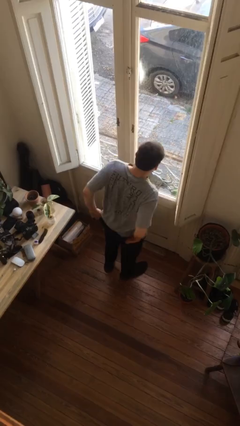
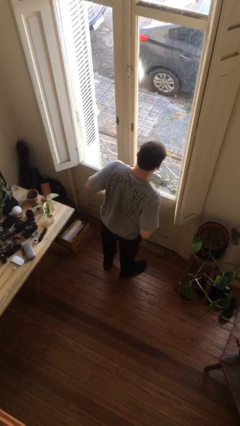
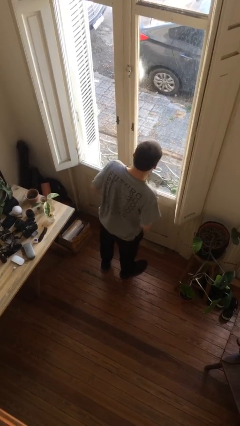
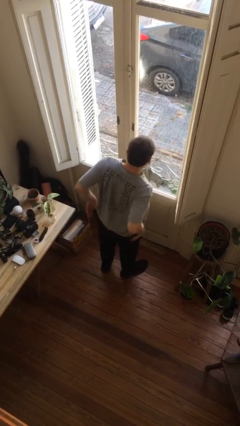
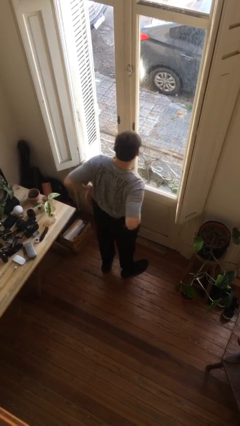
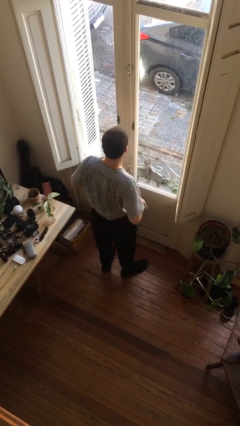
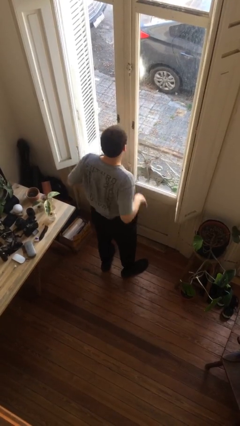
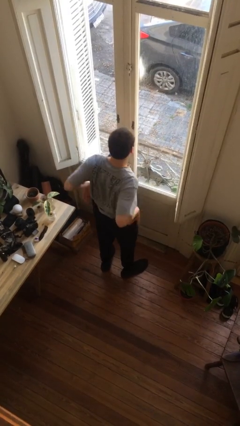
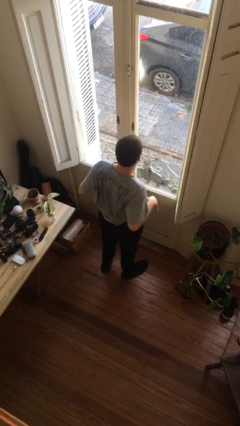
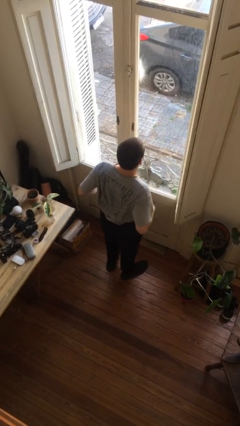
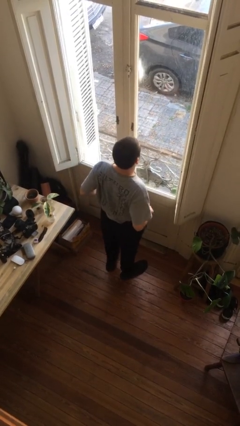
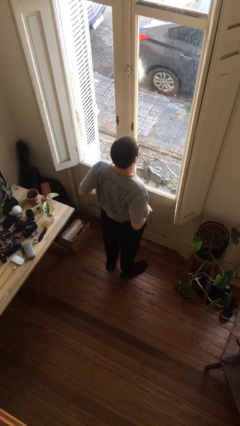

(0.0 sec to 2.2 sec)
person hikes up pants

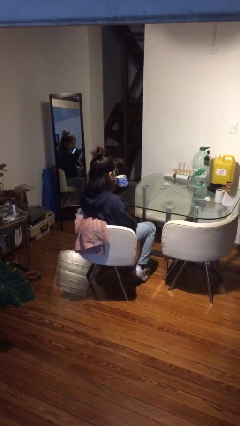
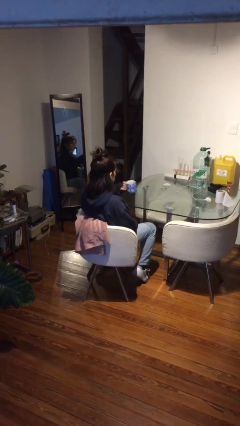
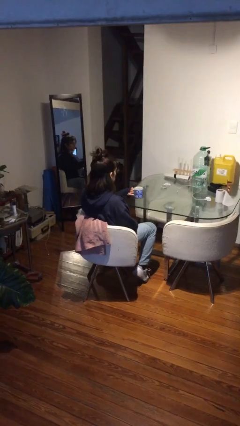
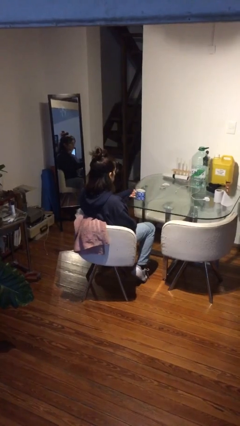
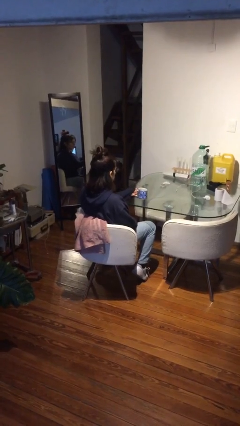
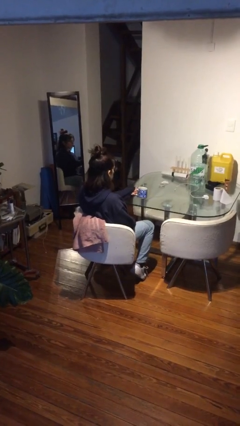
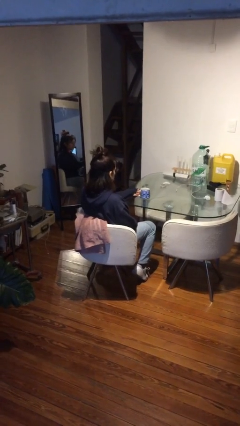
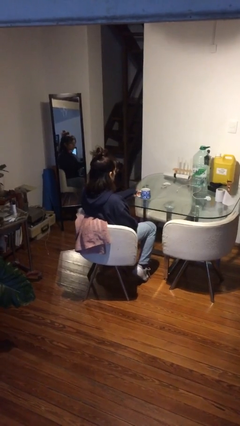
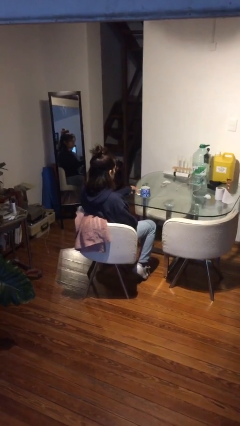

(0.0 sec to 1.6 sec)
person puts down object on table

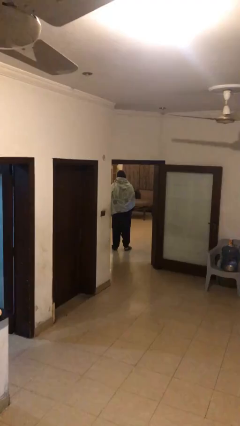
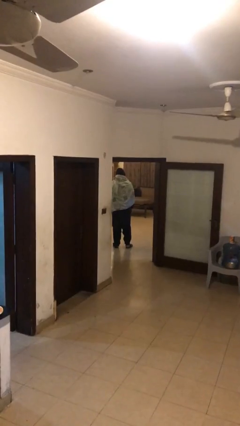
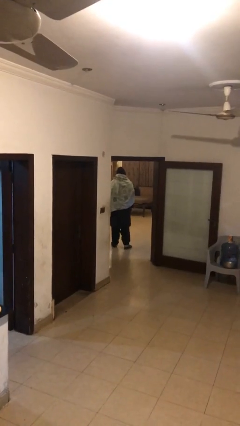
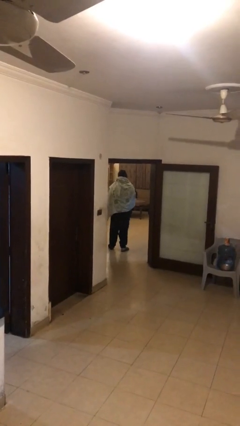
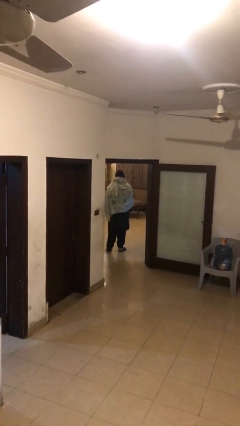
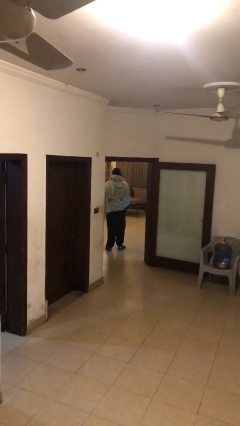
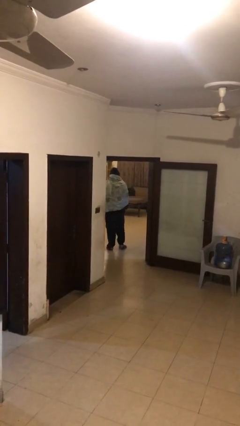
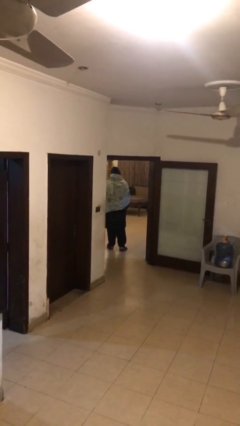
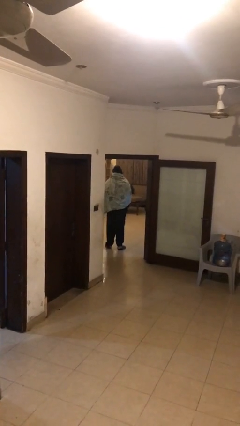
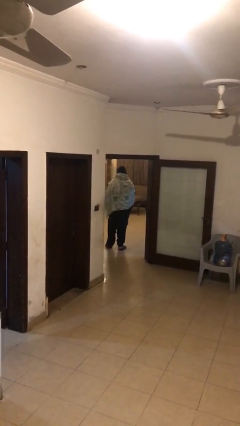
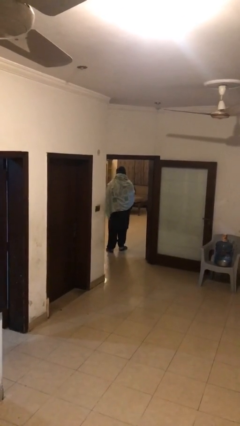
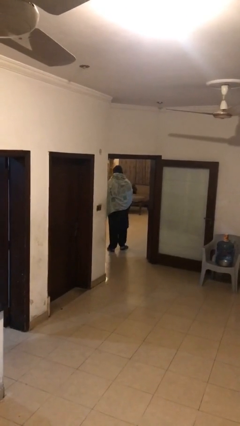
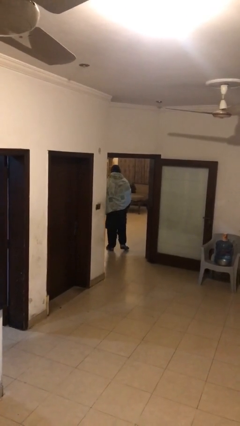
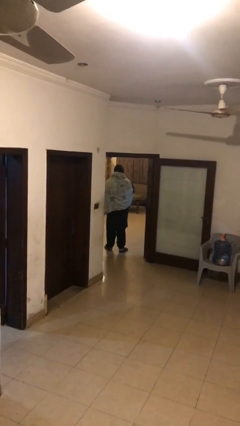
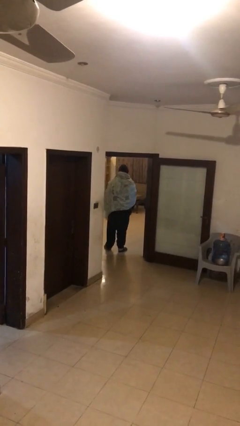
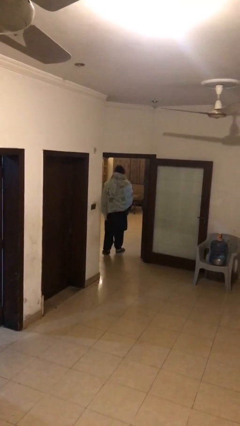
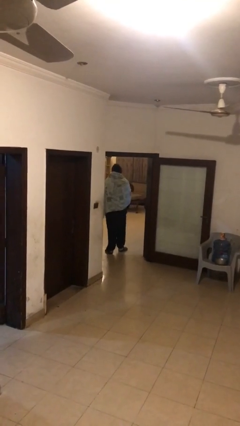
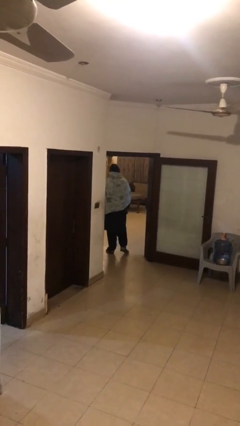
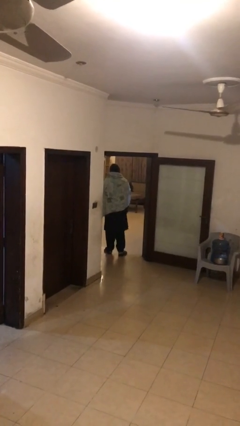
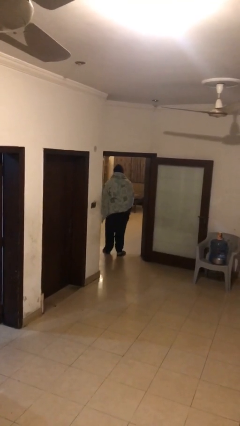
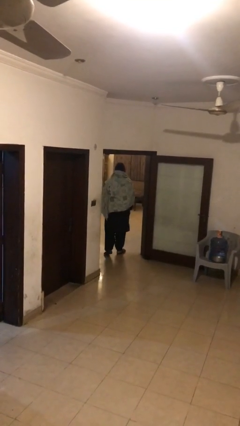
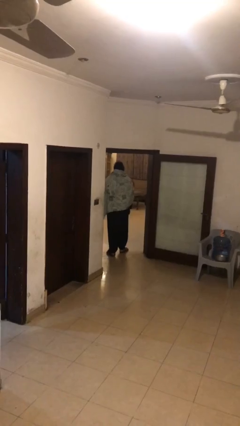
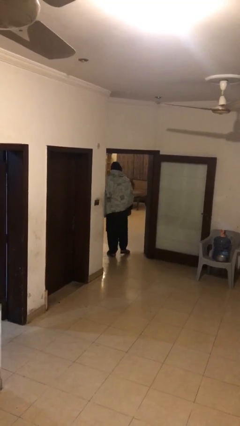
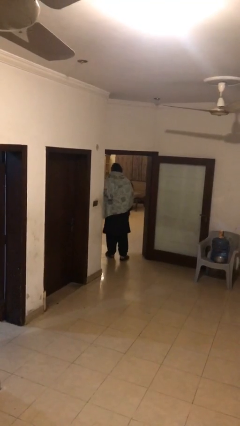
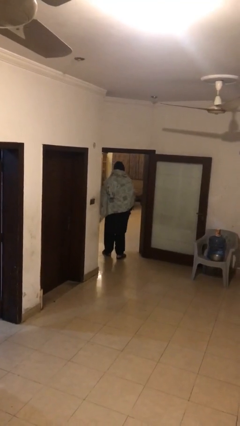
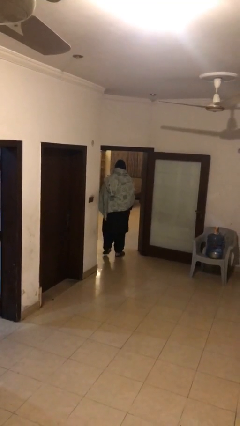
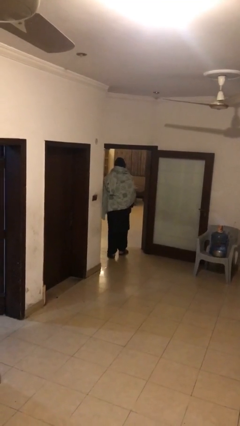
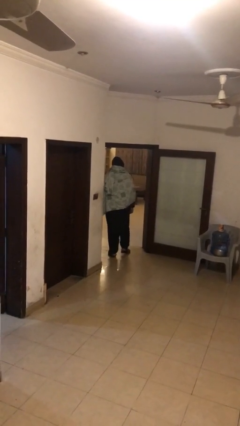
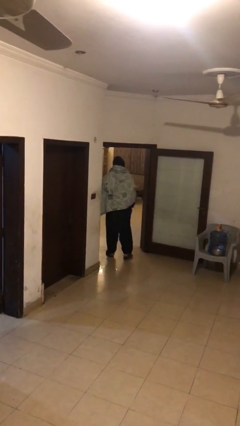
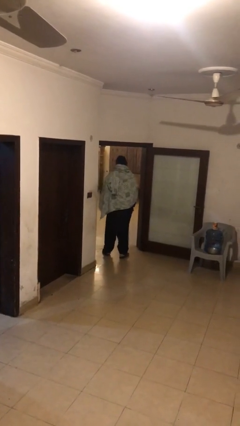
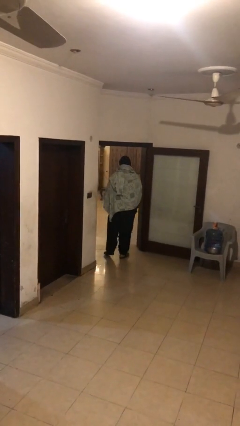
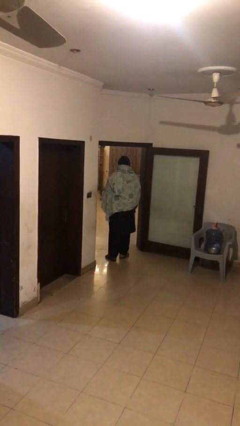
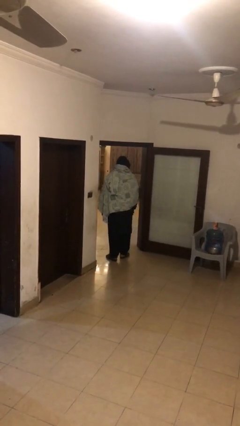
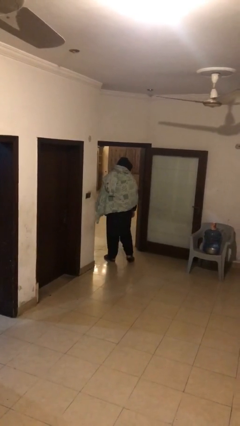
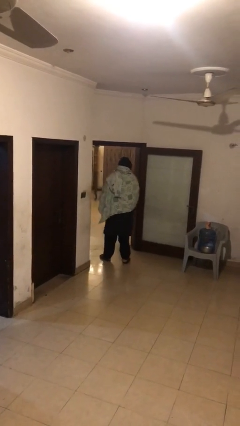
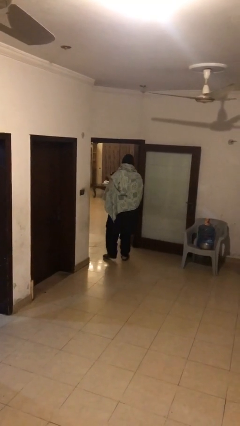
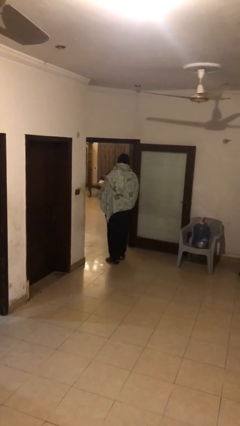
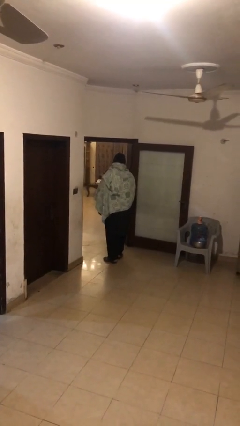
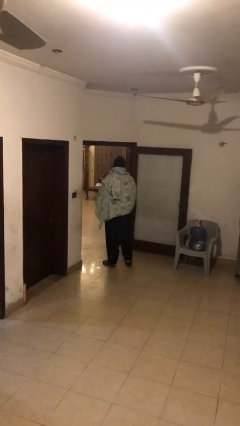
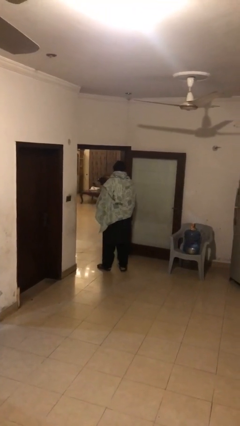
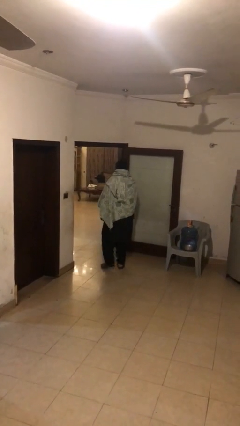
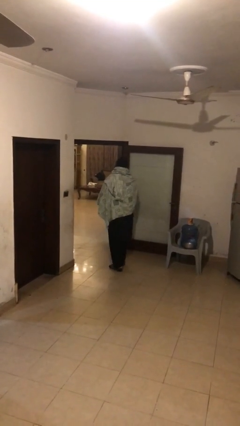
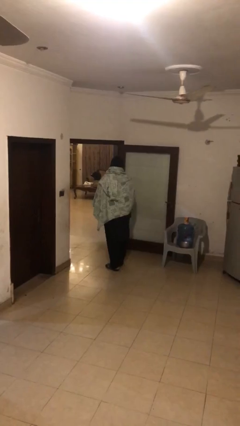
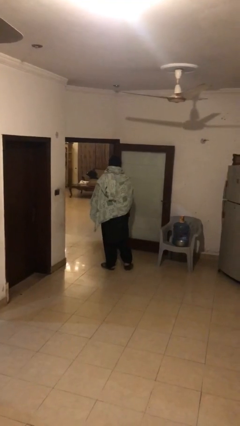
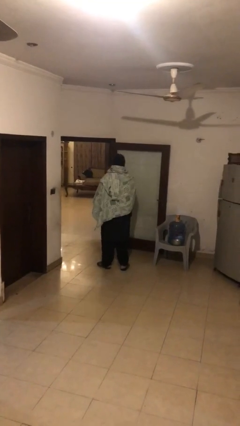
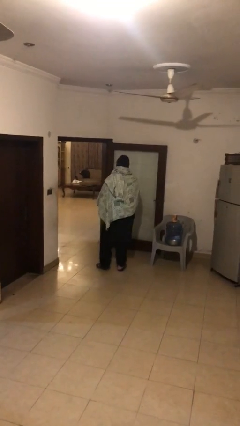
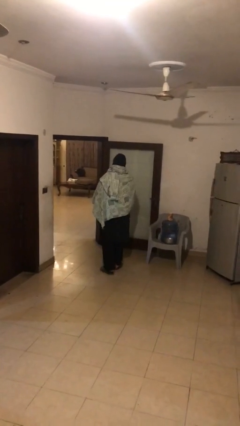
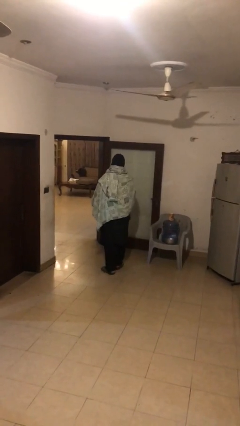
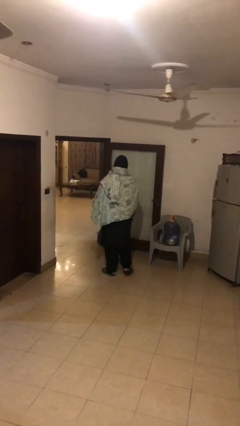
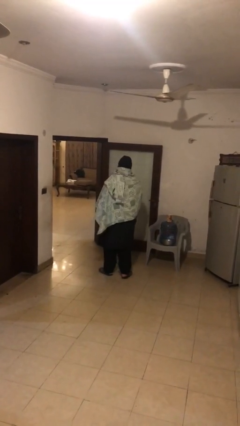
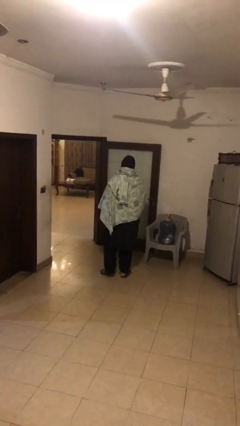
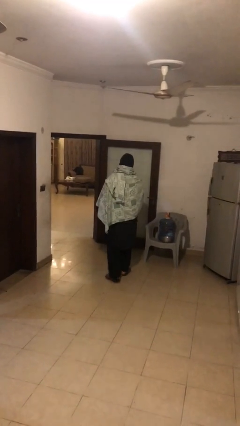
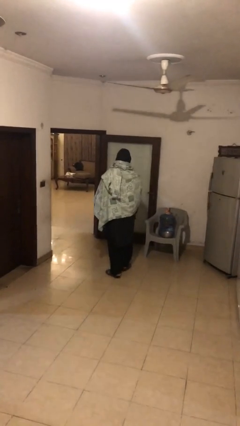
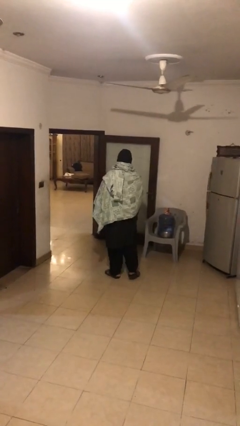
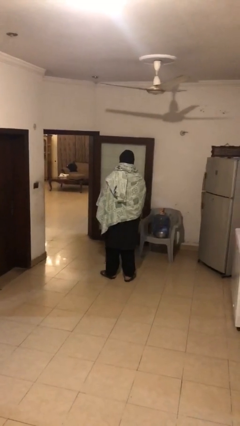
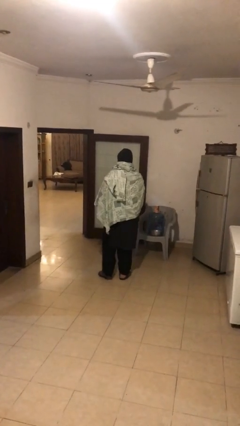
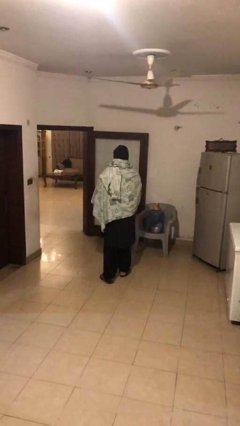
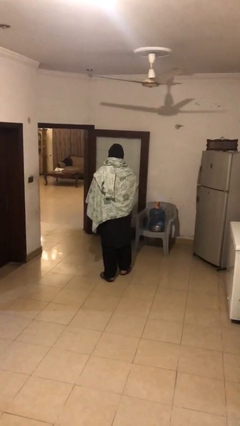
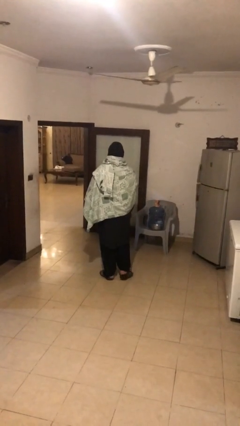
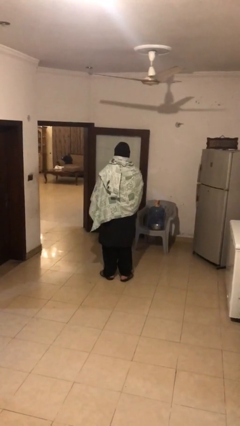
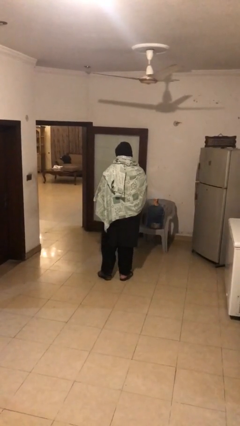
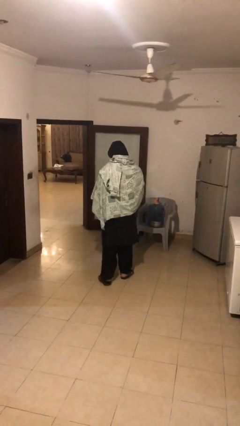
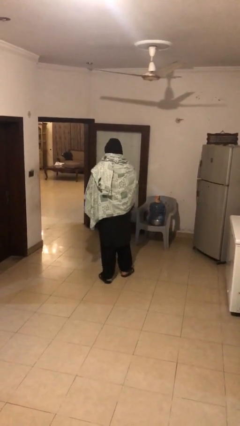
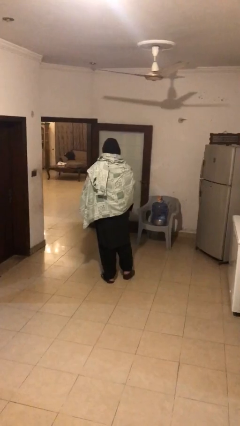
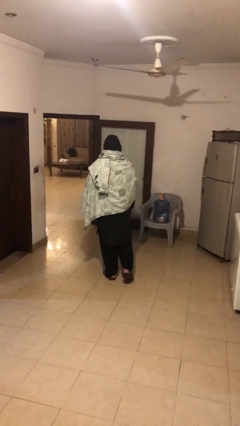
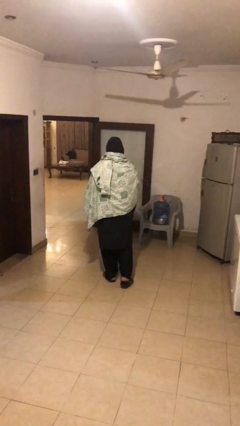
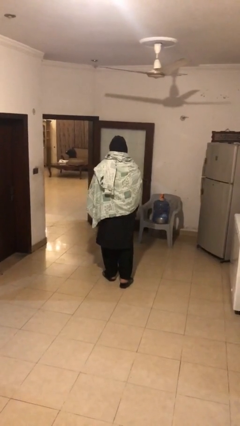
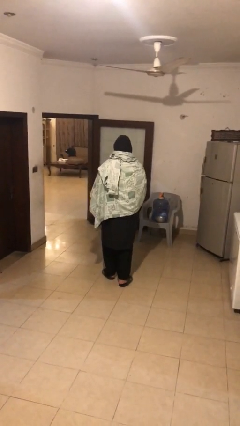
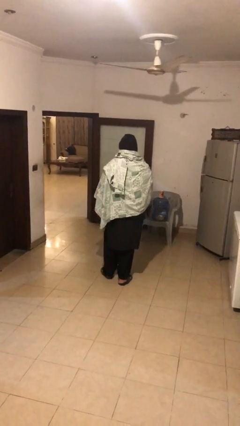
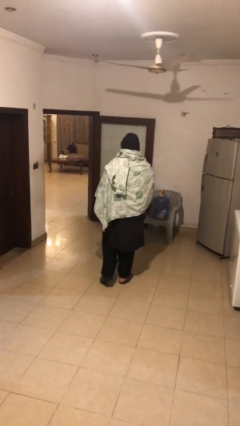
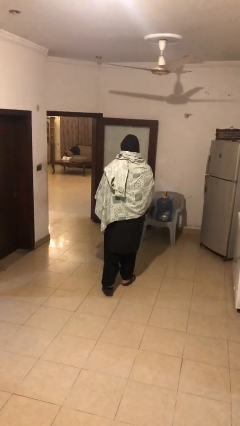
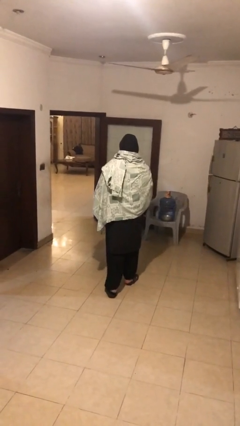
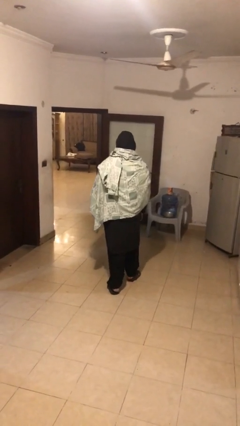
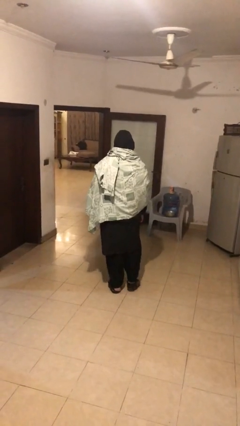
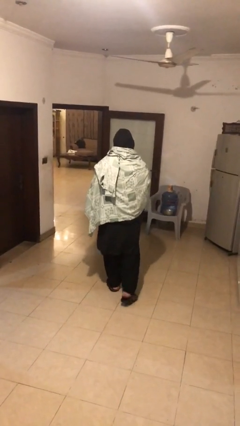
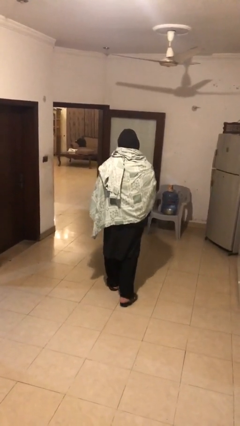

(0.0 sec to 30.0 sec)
person walks
